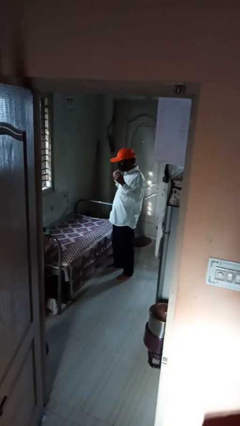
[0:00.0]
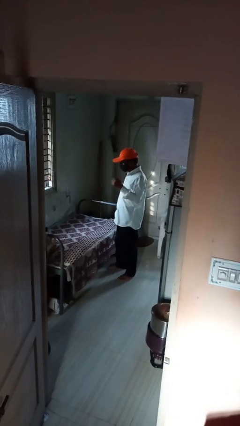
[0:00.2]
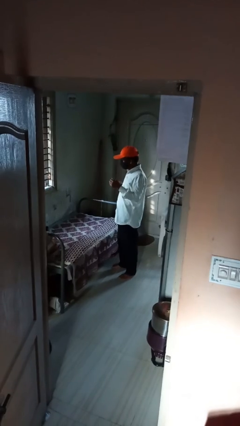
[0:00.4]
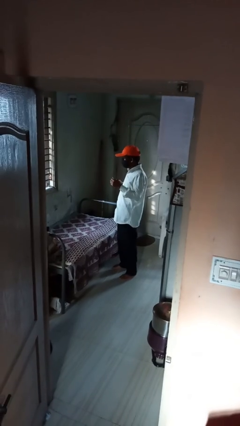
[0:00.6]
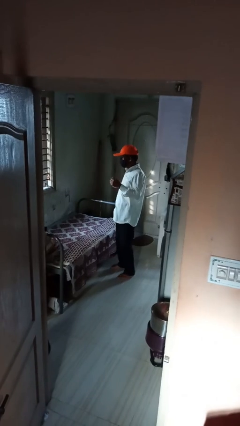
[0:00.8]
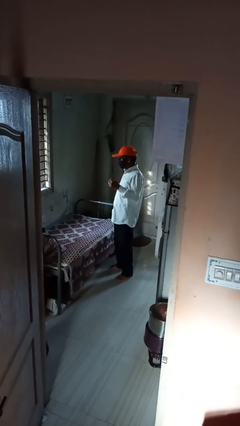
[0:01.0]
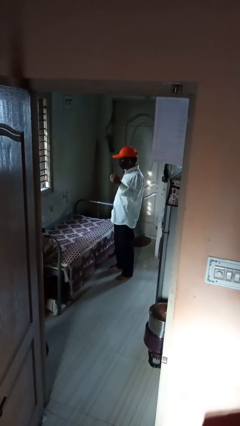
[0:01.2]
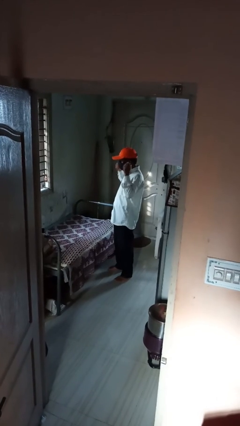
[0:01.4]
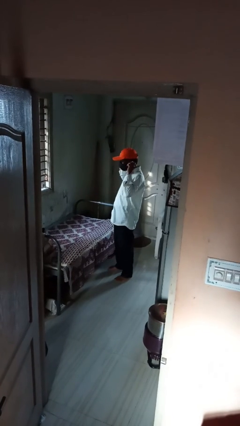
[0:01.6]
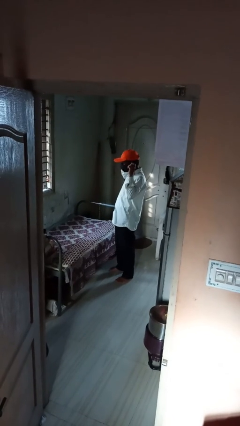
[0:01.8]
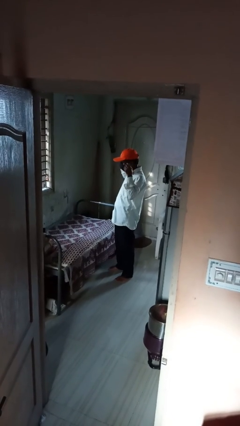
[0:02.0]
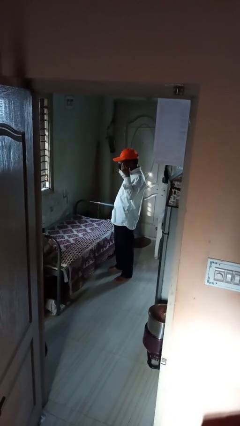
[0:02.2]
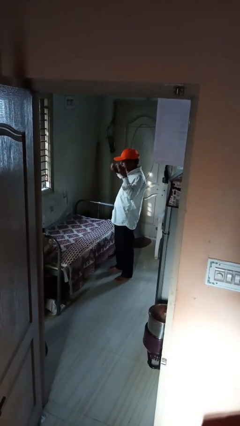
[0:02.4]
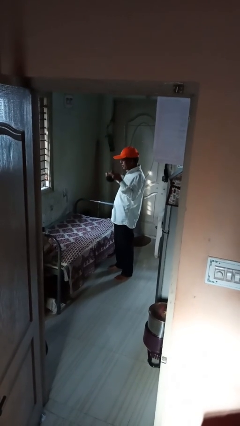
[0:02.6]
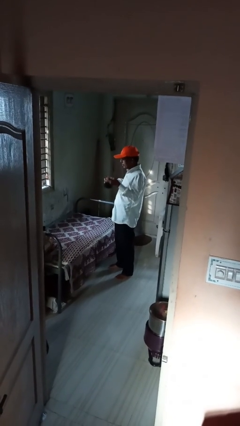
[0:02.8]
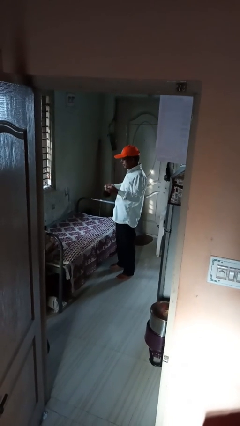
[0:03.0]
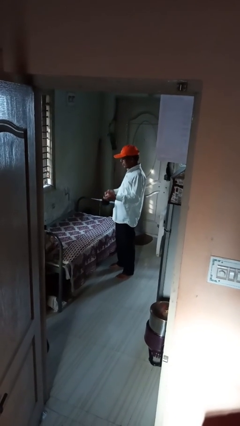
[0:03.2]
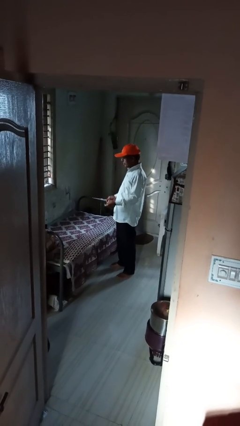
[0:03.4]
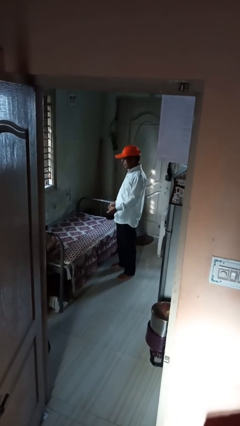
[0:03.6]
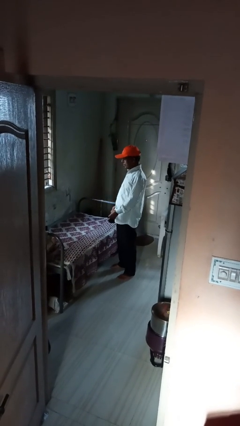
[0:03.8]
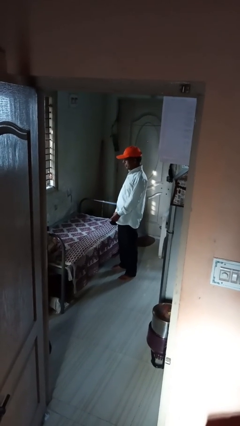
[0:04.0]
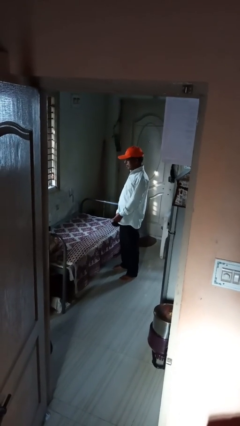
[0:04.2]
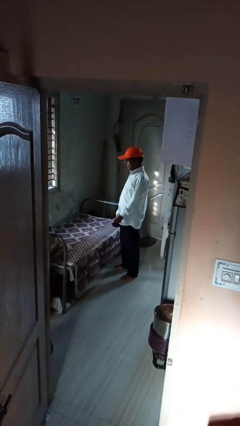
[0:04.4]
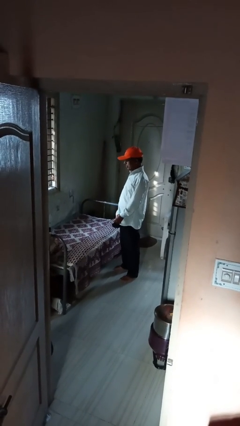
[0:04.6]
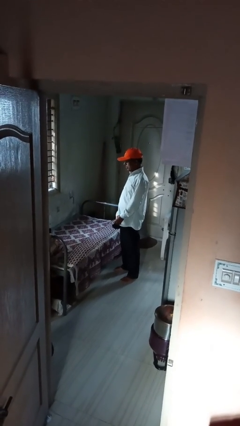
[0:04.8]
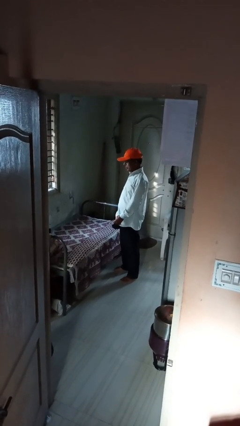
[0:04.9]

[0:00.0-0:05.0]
person takes off facemask

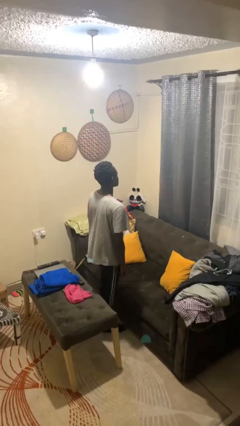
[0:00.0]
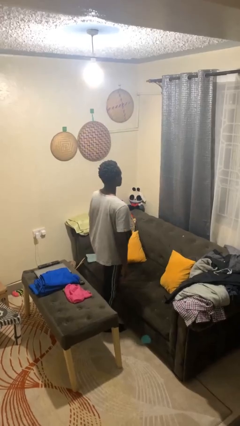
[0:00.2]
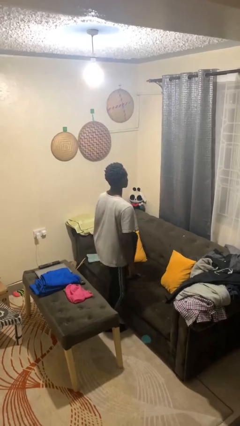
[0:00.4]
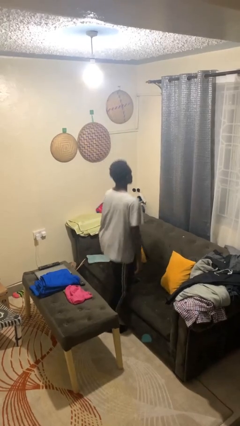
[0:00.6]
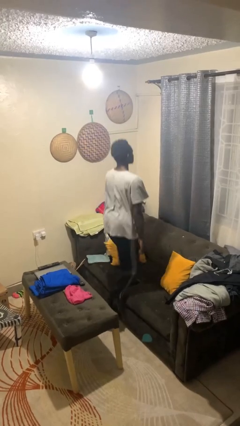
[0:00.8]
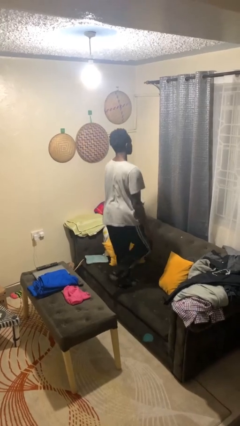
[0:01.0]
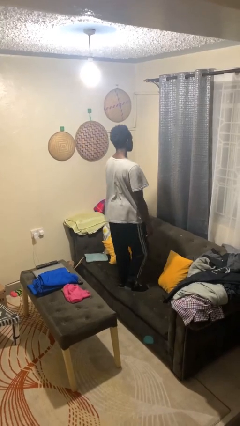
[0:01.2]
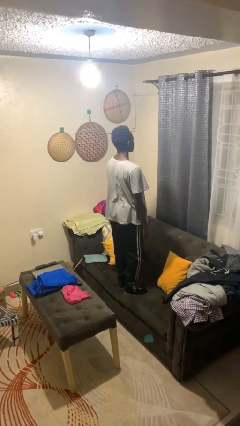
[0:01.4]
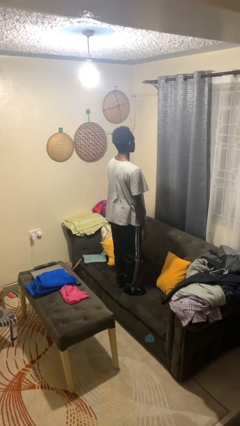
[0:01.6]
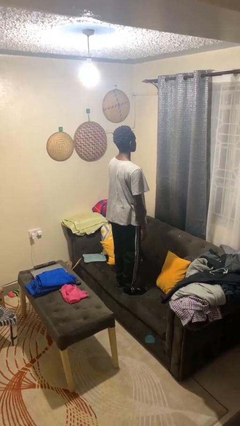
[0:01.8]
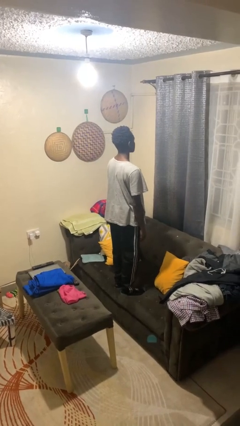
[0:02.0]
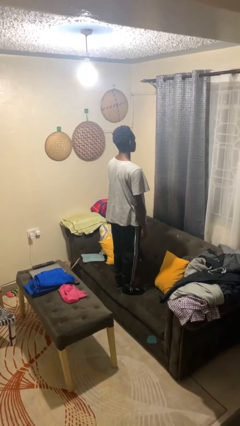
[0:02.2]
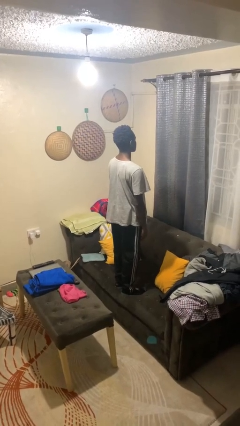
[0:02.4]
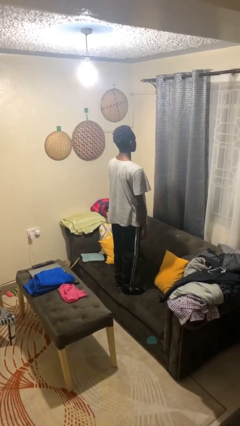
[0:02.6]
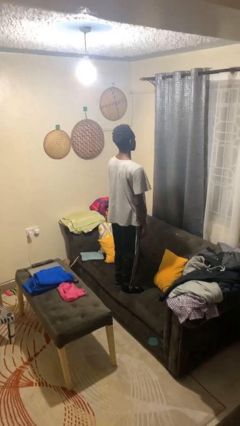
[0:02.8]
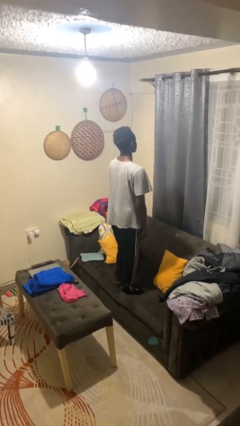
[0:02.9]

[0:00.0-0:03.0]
person jumps on couch

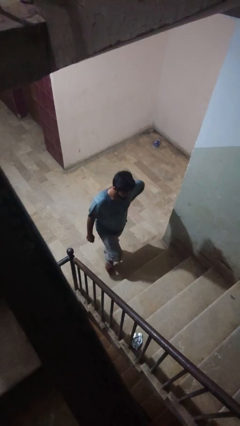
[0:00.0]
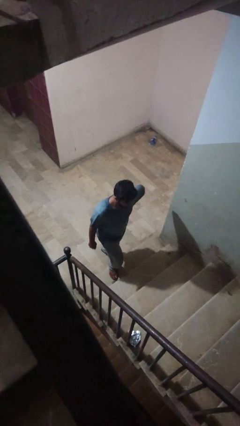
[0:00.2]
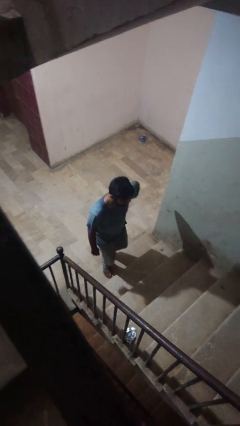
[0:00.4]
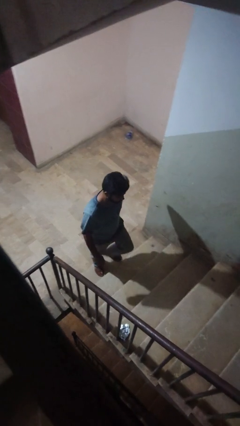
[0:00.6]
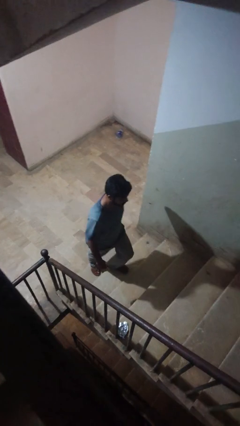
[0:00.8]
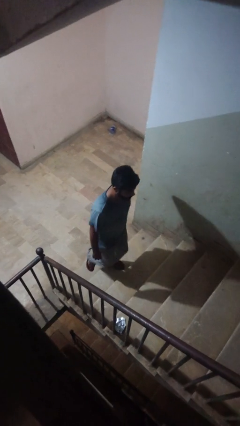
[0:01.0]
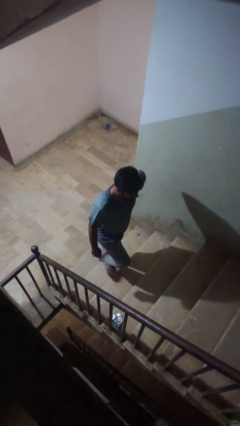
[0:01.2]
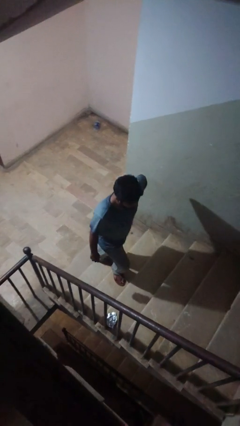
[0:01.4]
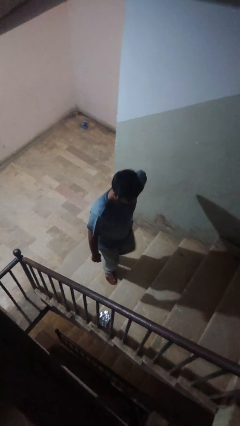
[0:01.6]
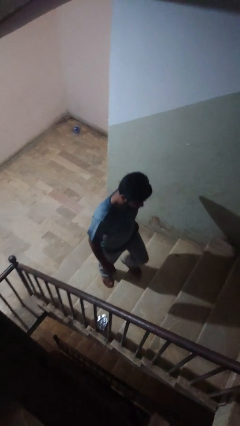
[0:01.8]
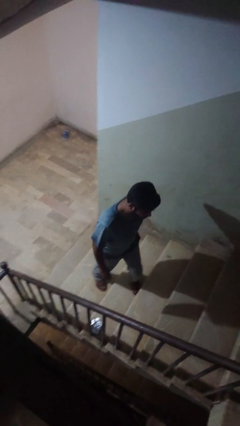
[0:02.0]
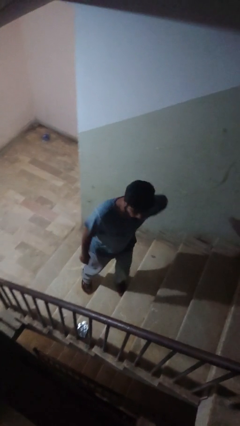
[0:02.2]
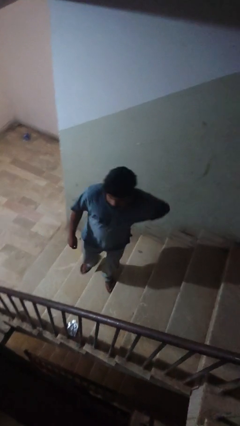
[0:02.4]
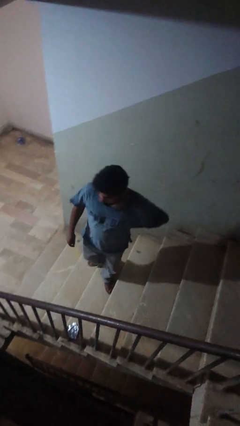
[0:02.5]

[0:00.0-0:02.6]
person climbs up stairs

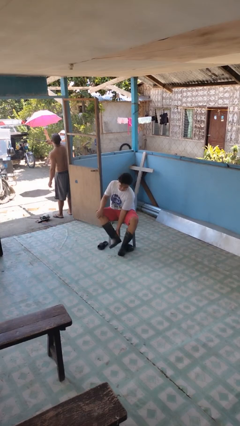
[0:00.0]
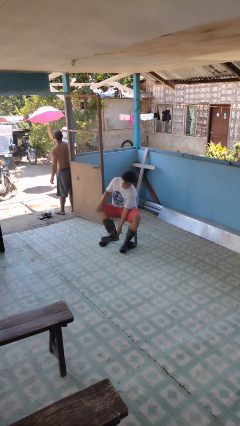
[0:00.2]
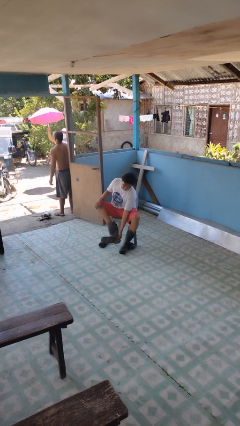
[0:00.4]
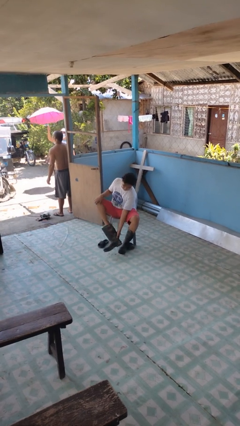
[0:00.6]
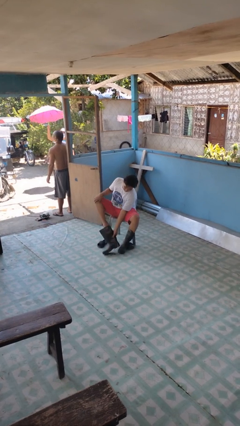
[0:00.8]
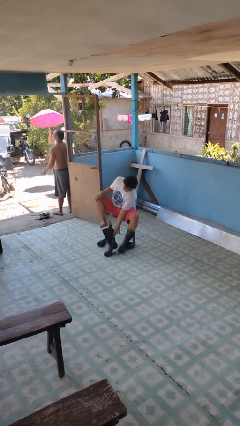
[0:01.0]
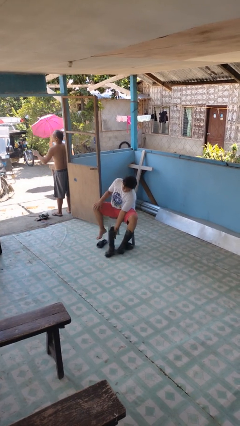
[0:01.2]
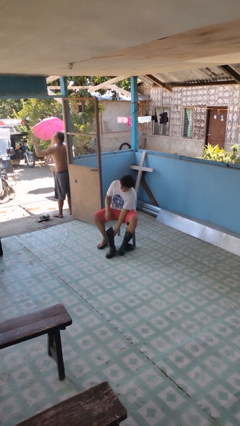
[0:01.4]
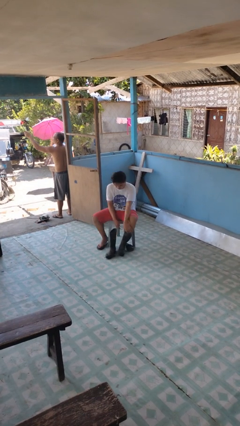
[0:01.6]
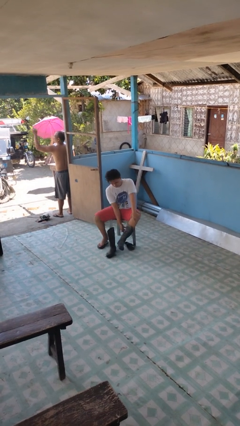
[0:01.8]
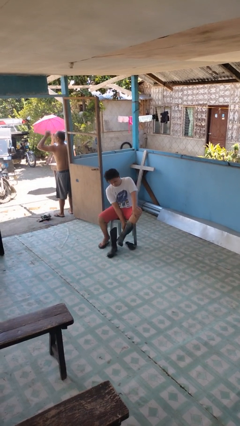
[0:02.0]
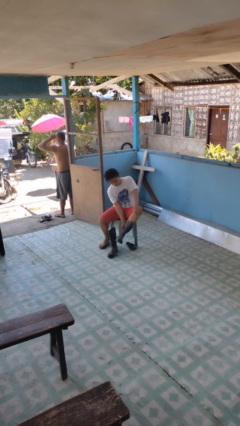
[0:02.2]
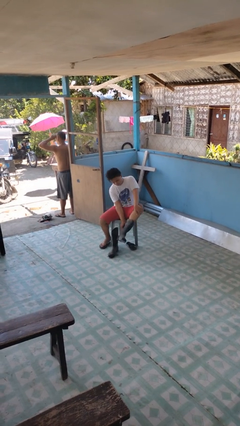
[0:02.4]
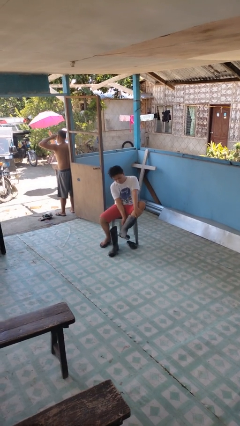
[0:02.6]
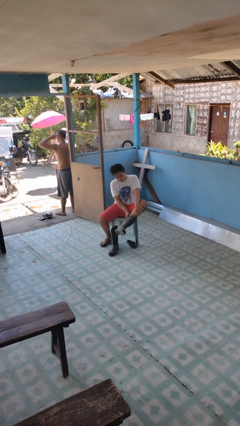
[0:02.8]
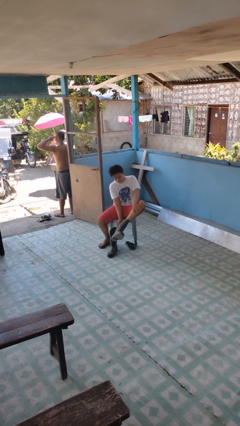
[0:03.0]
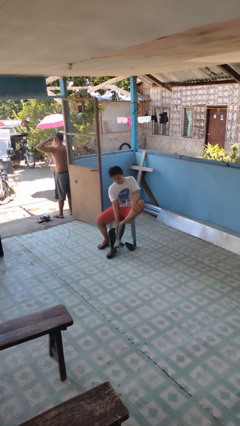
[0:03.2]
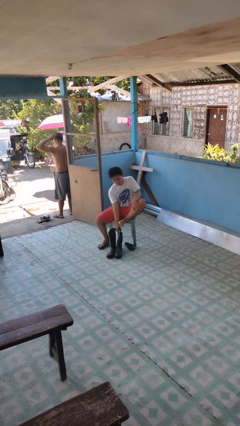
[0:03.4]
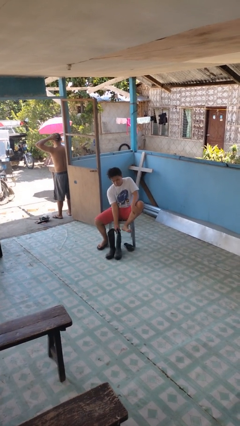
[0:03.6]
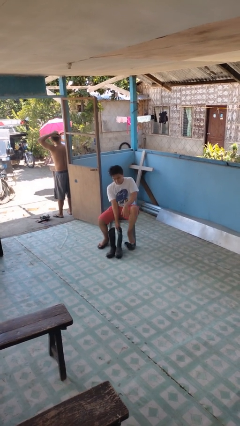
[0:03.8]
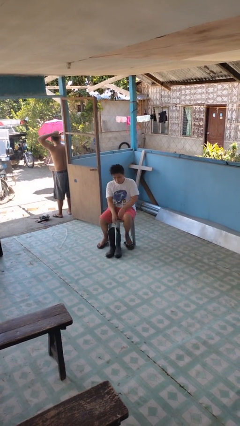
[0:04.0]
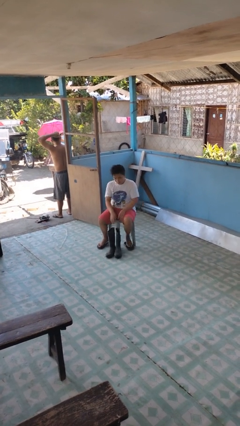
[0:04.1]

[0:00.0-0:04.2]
person takes off boots

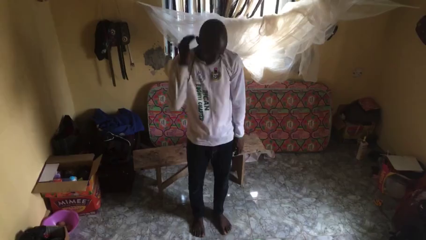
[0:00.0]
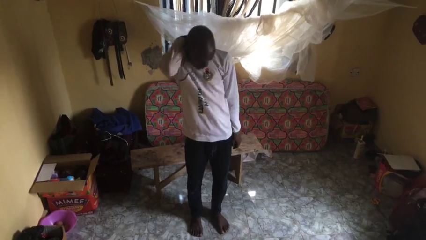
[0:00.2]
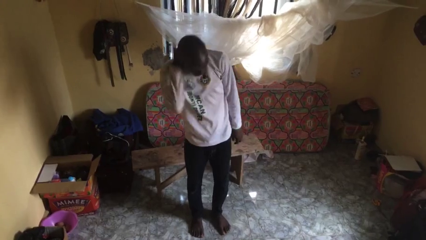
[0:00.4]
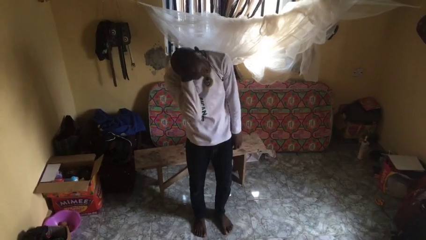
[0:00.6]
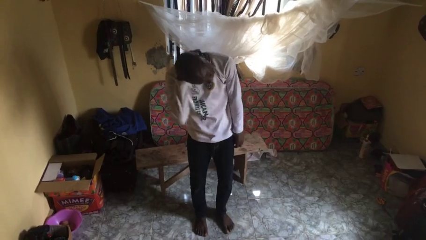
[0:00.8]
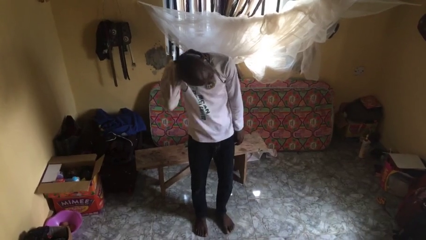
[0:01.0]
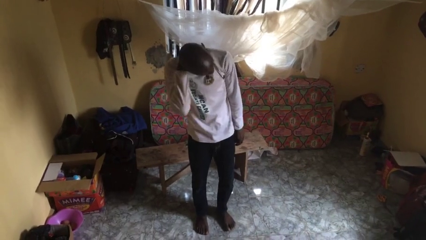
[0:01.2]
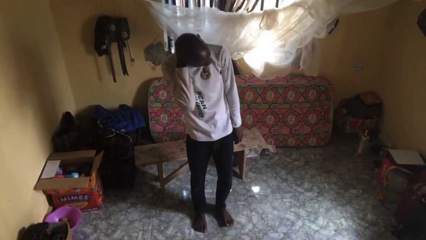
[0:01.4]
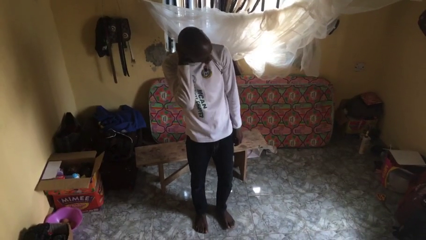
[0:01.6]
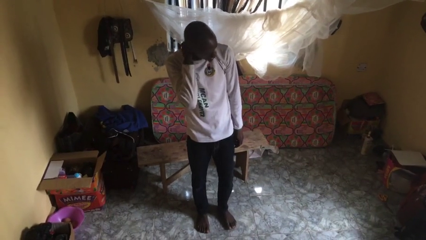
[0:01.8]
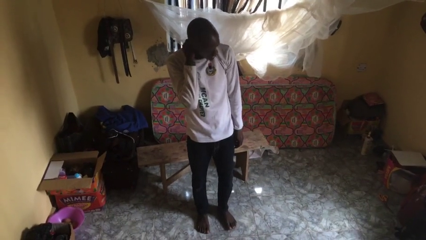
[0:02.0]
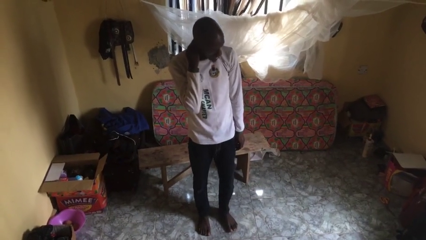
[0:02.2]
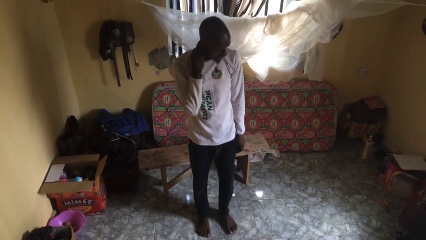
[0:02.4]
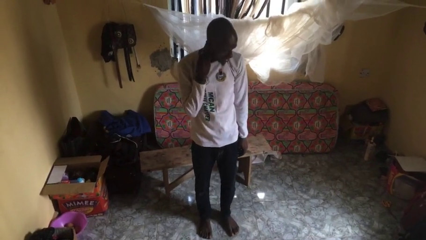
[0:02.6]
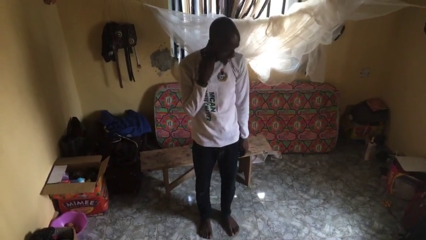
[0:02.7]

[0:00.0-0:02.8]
person rubs neck
